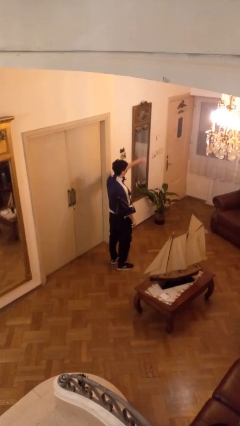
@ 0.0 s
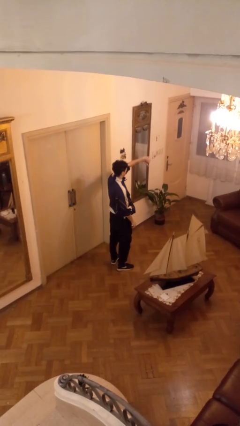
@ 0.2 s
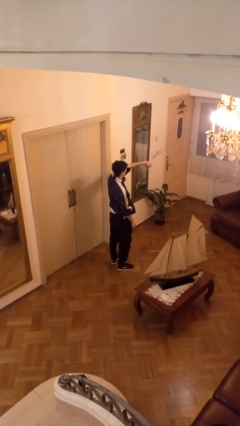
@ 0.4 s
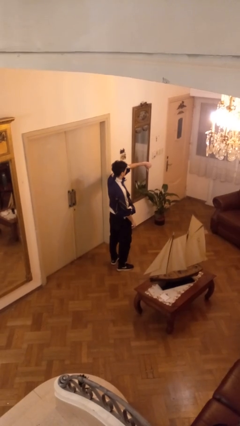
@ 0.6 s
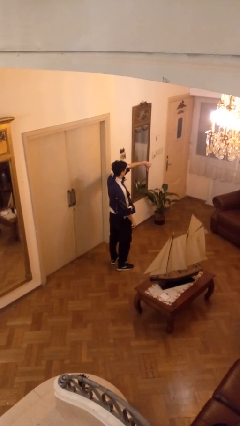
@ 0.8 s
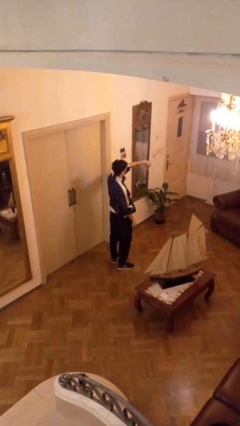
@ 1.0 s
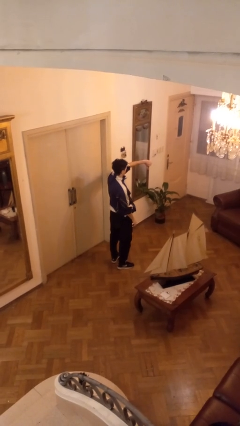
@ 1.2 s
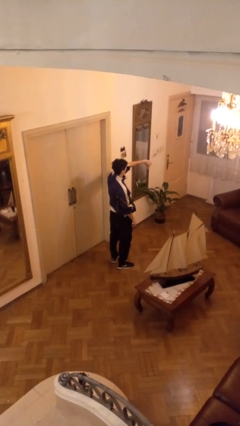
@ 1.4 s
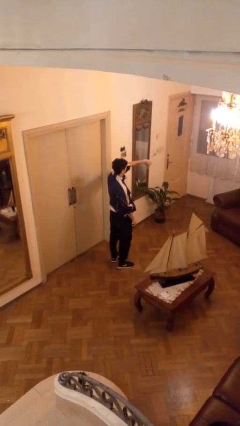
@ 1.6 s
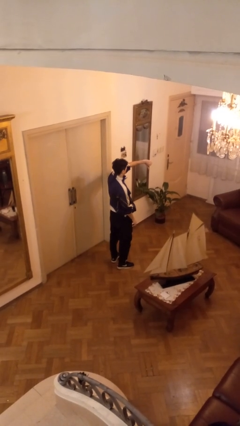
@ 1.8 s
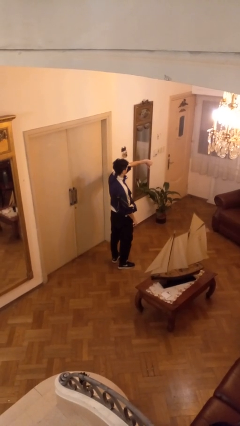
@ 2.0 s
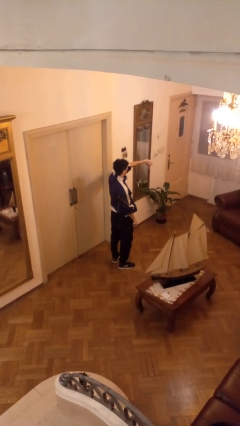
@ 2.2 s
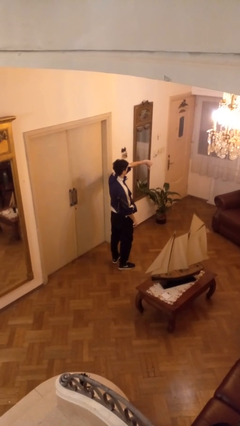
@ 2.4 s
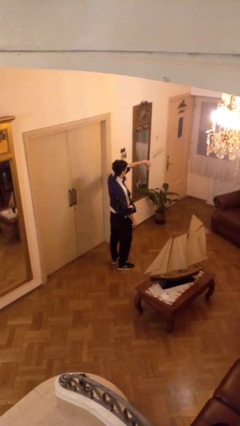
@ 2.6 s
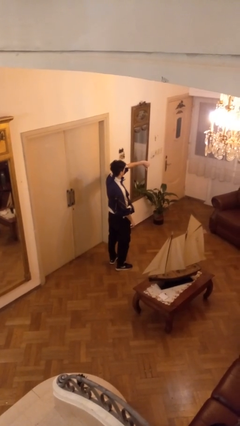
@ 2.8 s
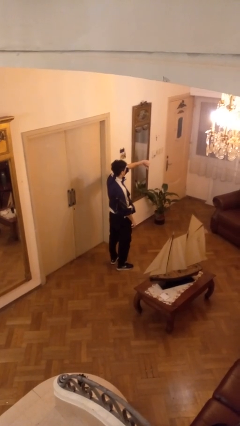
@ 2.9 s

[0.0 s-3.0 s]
person gestures thumbs down

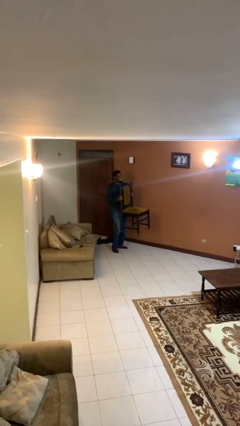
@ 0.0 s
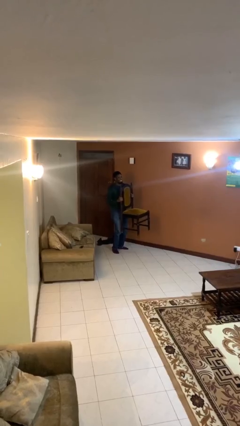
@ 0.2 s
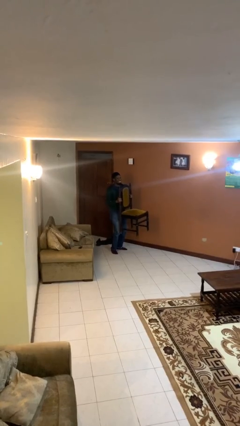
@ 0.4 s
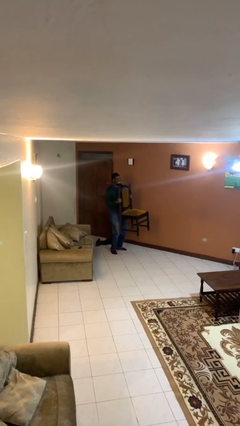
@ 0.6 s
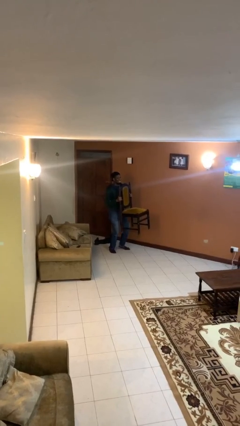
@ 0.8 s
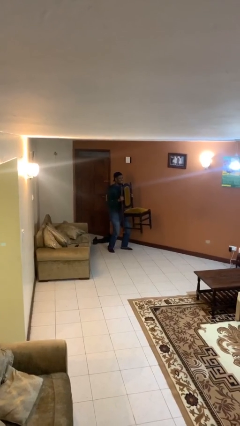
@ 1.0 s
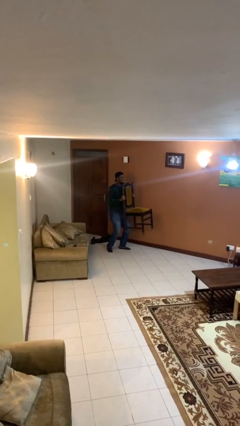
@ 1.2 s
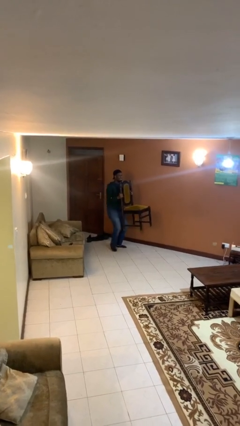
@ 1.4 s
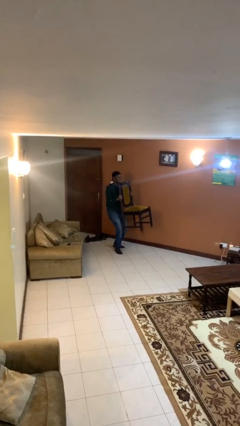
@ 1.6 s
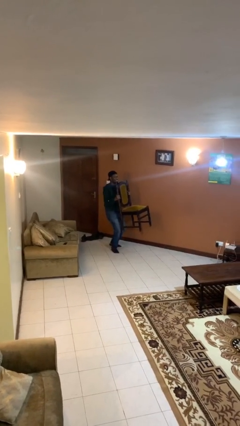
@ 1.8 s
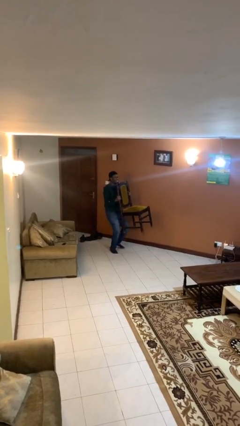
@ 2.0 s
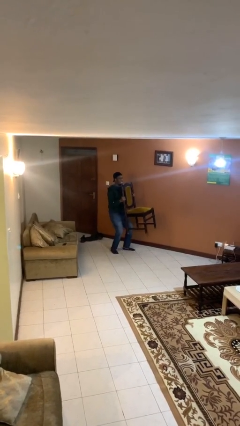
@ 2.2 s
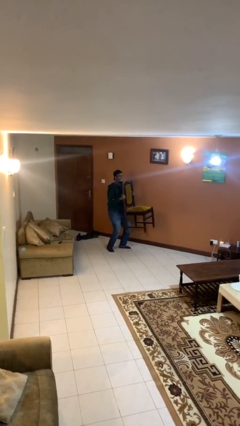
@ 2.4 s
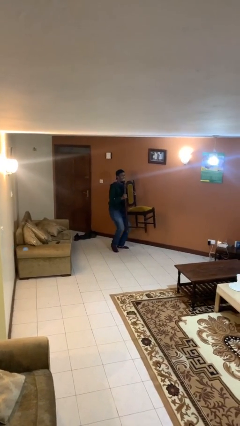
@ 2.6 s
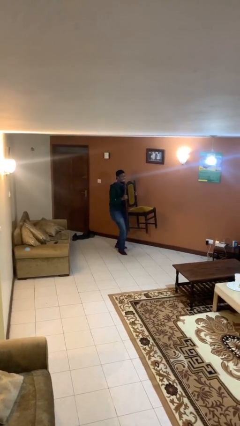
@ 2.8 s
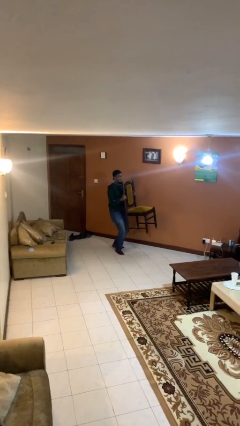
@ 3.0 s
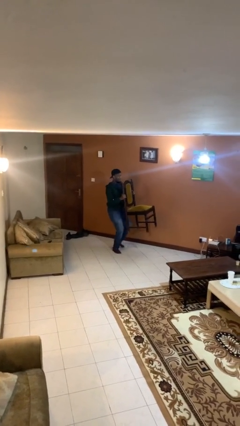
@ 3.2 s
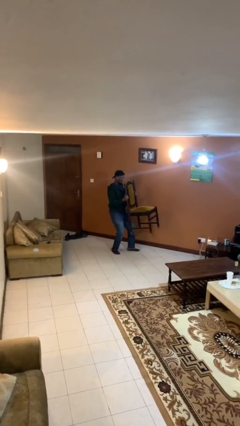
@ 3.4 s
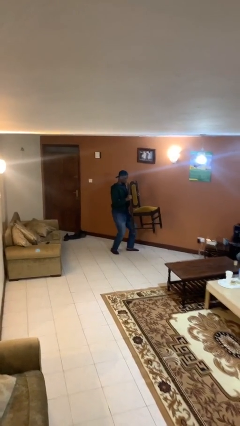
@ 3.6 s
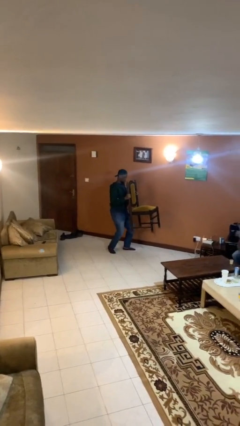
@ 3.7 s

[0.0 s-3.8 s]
person carries heavy object

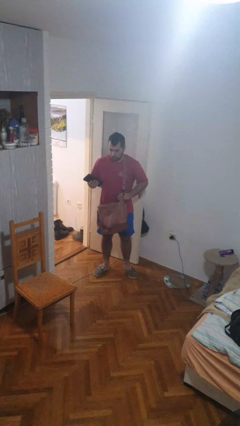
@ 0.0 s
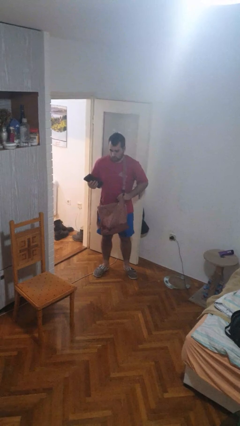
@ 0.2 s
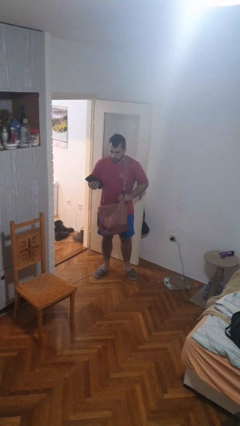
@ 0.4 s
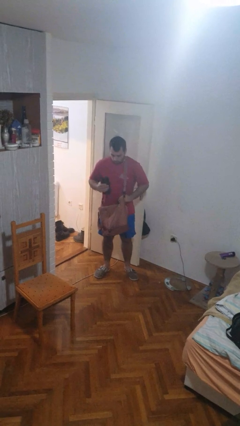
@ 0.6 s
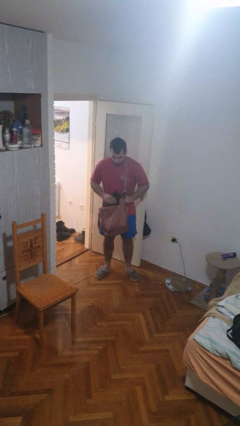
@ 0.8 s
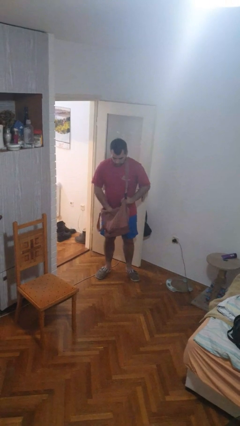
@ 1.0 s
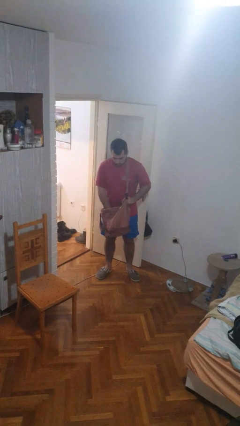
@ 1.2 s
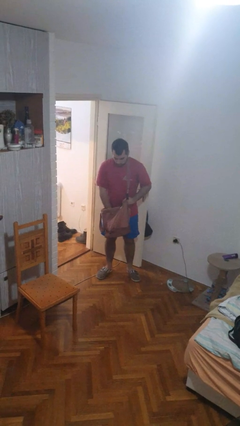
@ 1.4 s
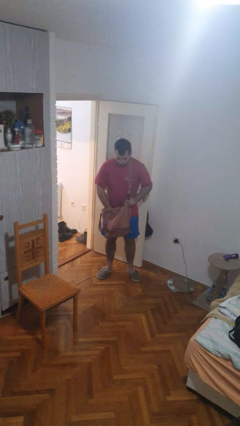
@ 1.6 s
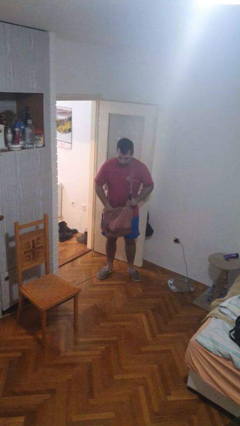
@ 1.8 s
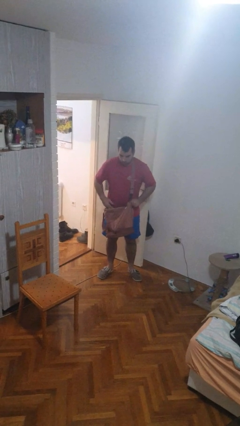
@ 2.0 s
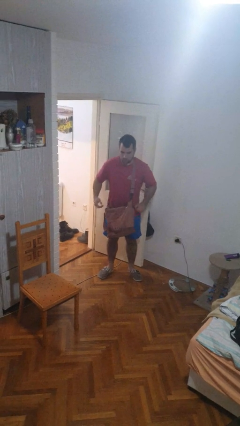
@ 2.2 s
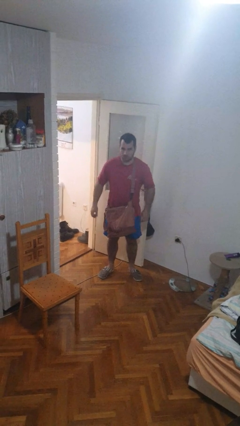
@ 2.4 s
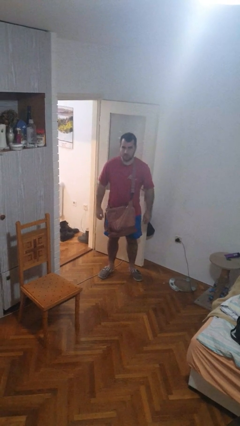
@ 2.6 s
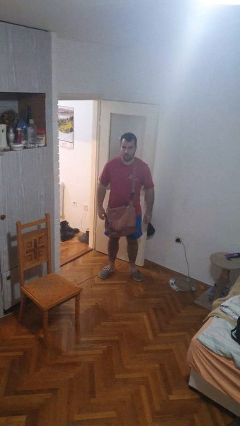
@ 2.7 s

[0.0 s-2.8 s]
person puts object into purse

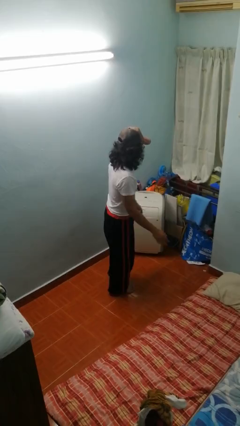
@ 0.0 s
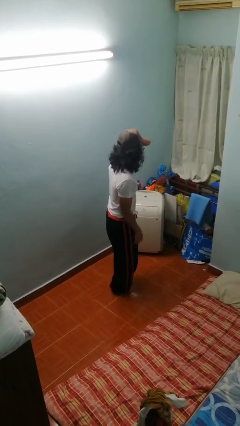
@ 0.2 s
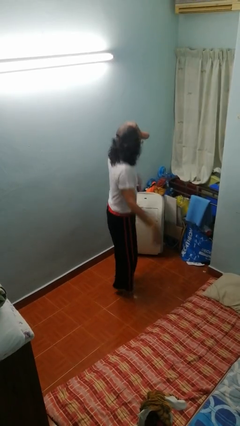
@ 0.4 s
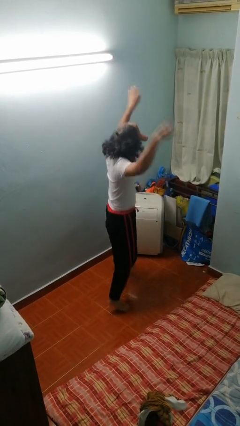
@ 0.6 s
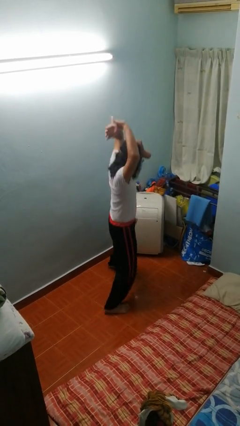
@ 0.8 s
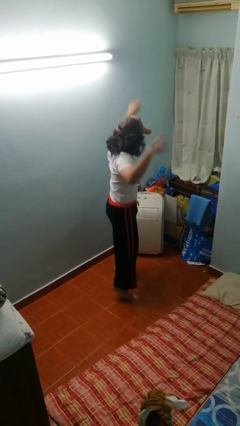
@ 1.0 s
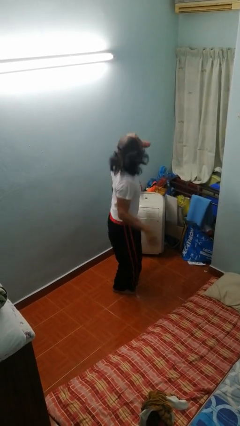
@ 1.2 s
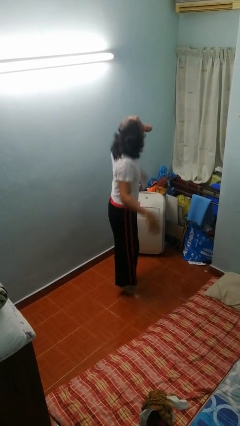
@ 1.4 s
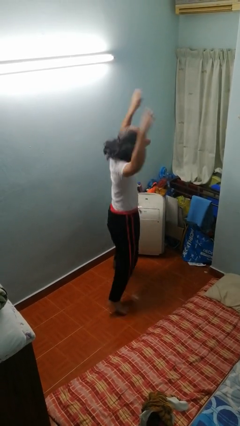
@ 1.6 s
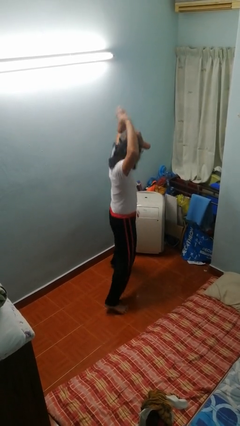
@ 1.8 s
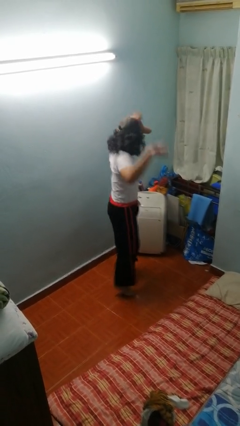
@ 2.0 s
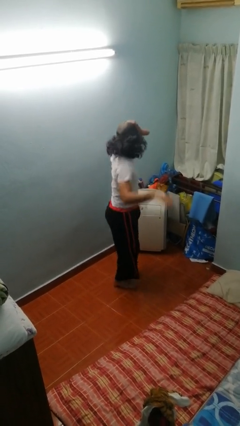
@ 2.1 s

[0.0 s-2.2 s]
person exercises with jumping jacks

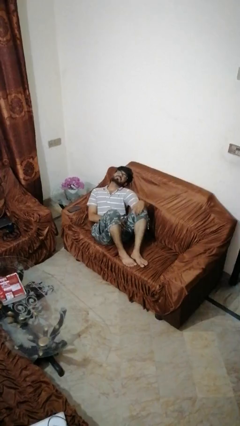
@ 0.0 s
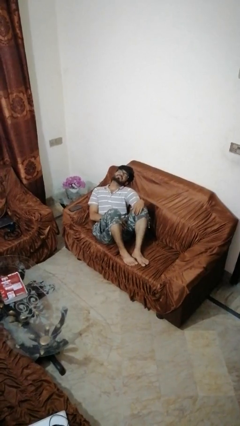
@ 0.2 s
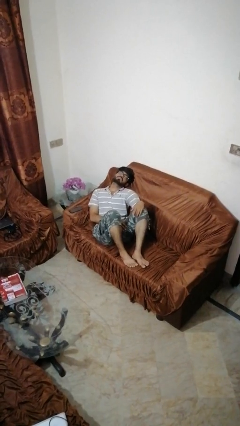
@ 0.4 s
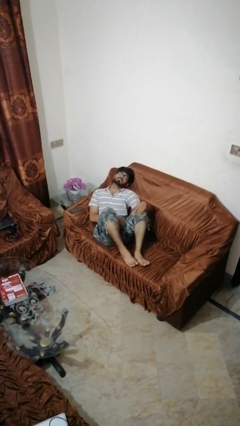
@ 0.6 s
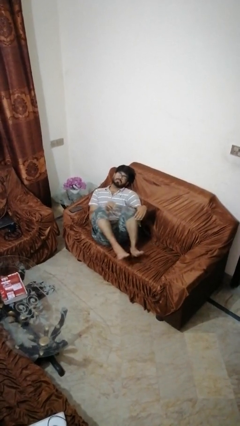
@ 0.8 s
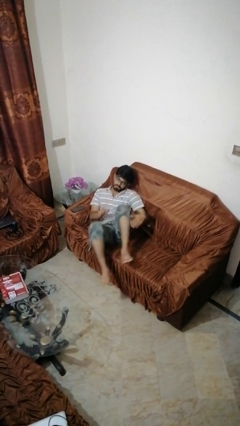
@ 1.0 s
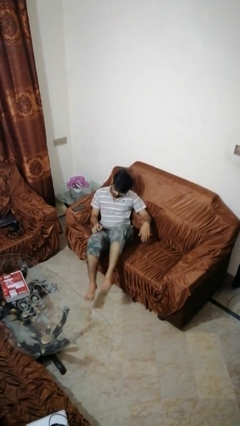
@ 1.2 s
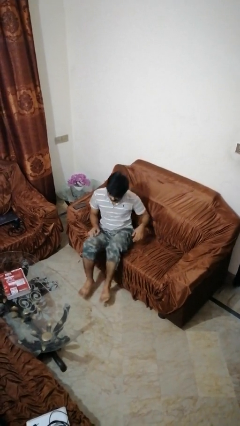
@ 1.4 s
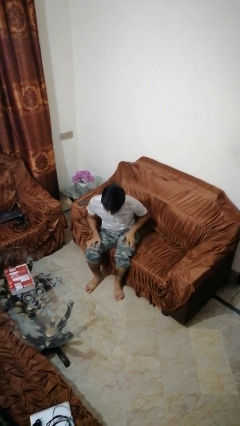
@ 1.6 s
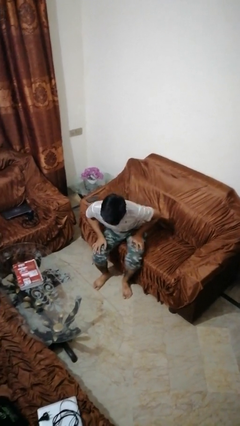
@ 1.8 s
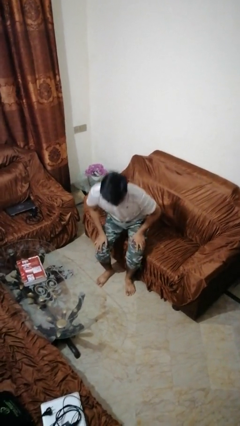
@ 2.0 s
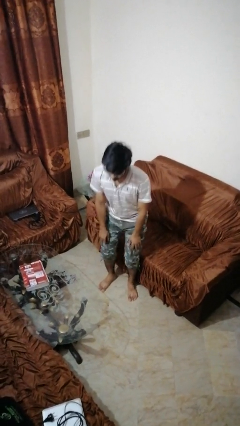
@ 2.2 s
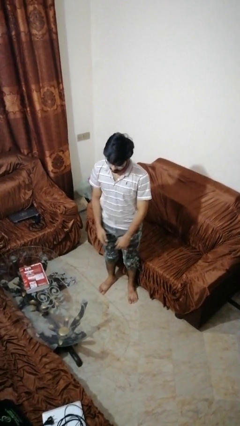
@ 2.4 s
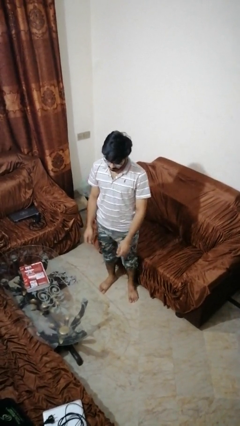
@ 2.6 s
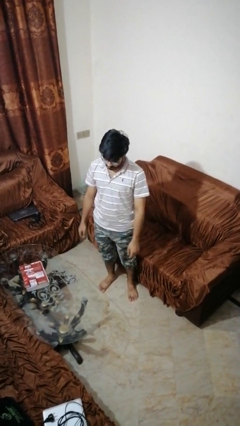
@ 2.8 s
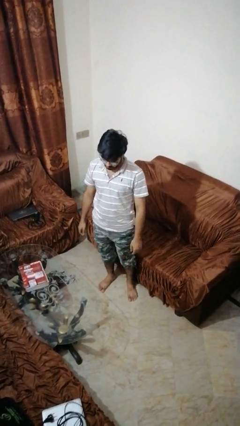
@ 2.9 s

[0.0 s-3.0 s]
person stands up

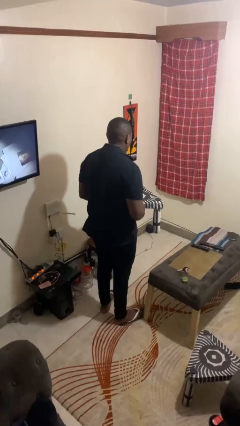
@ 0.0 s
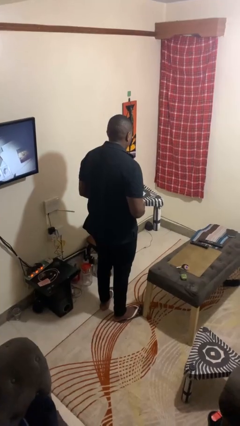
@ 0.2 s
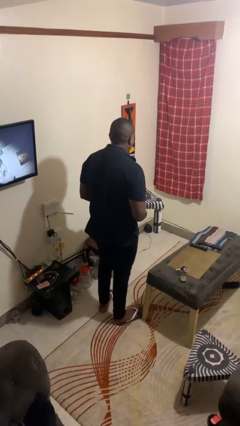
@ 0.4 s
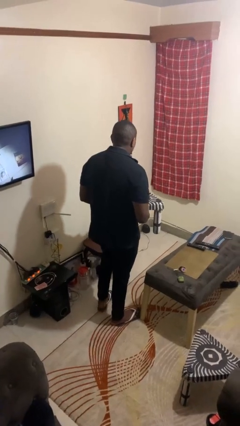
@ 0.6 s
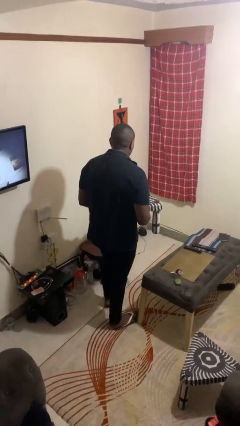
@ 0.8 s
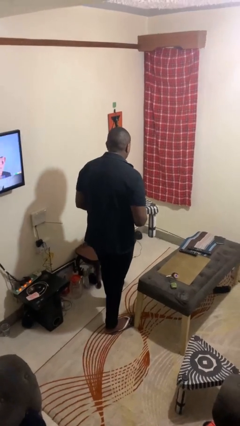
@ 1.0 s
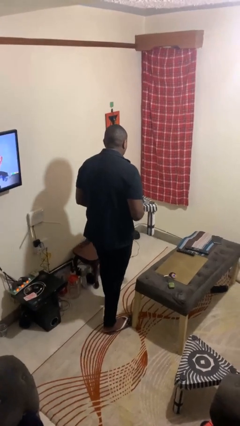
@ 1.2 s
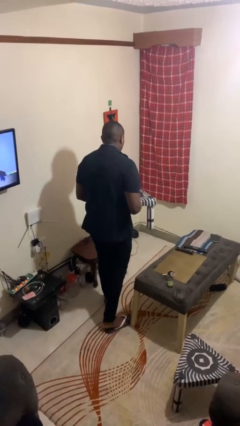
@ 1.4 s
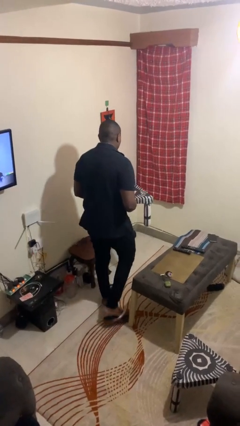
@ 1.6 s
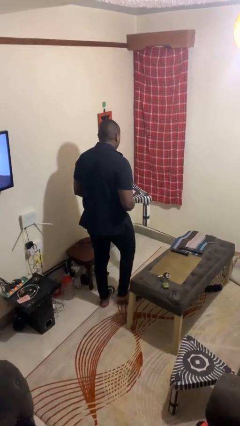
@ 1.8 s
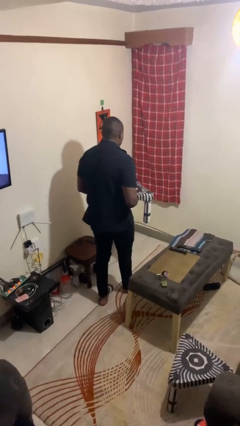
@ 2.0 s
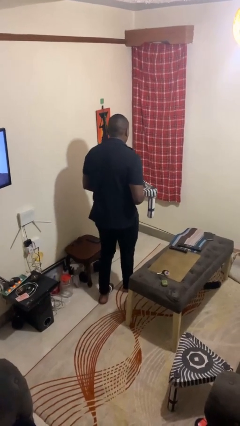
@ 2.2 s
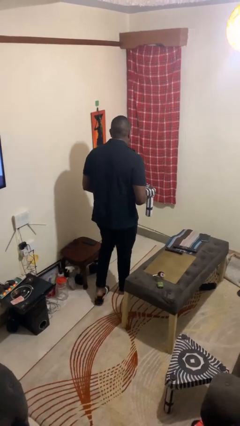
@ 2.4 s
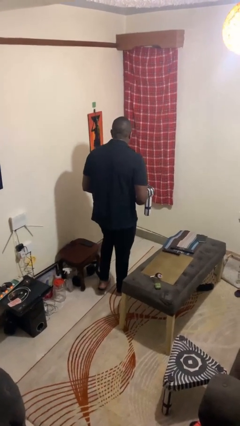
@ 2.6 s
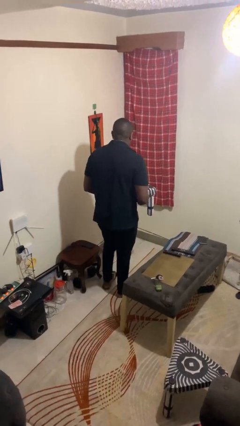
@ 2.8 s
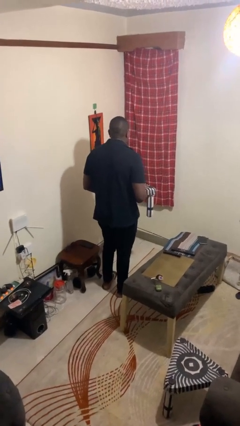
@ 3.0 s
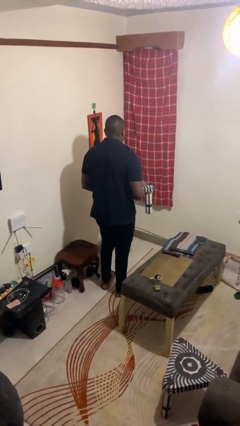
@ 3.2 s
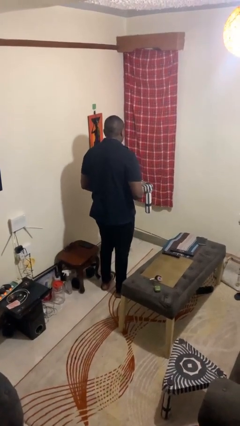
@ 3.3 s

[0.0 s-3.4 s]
person carries groceries
